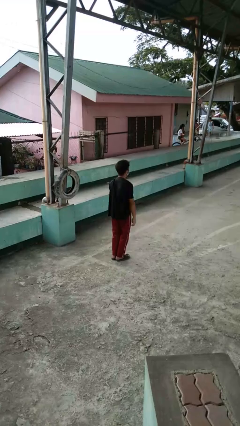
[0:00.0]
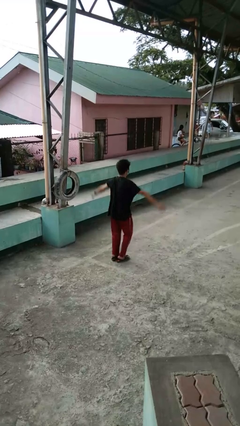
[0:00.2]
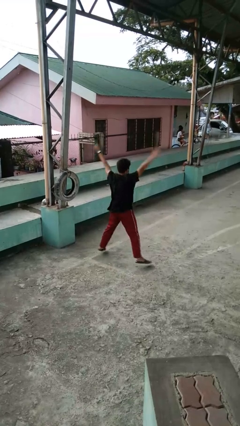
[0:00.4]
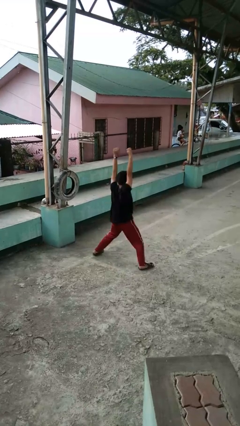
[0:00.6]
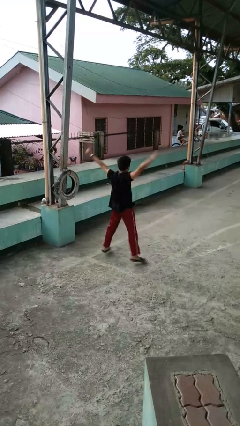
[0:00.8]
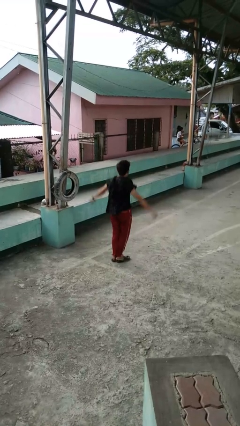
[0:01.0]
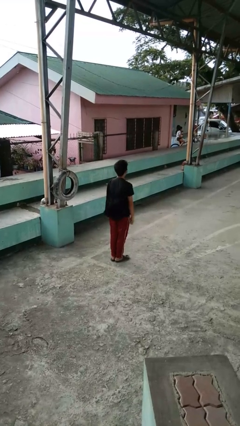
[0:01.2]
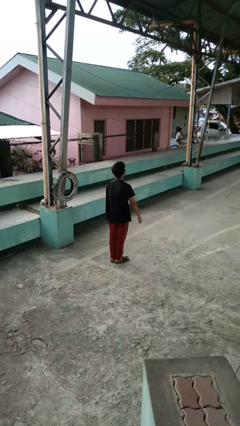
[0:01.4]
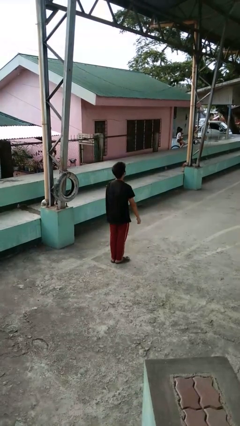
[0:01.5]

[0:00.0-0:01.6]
person exercises with jumping jacks

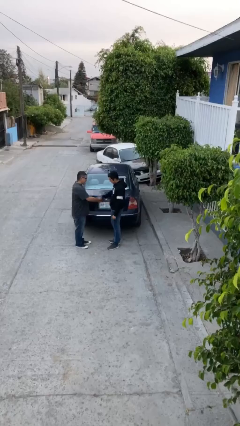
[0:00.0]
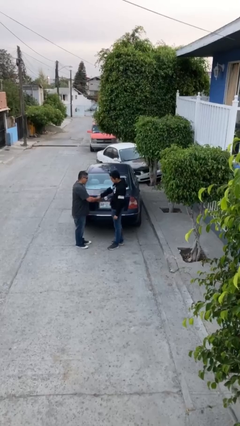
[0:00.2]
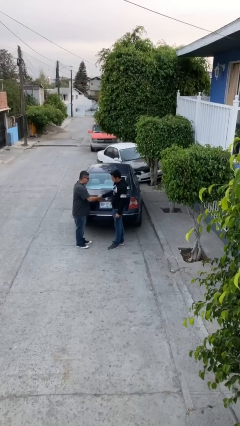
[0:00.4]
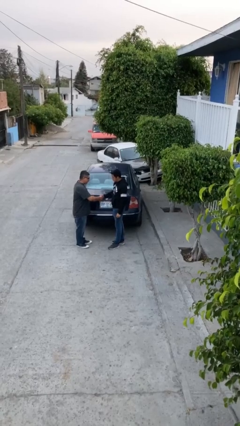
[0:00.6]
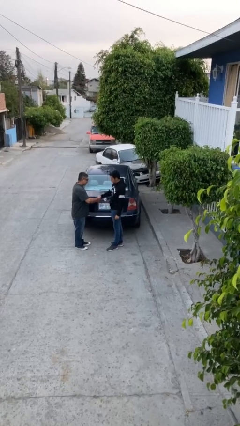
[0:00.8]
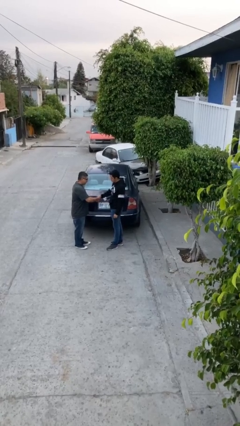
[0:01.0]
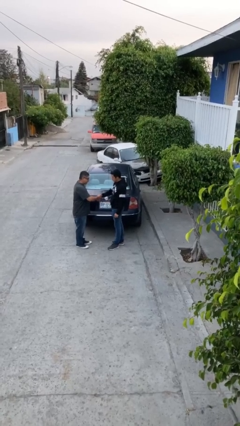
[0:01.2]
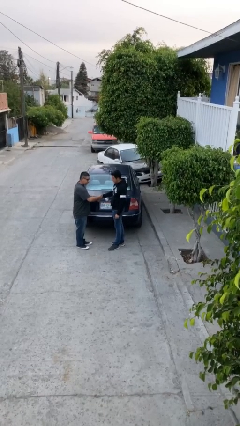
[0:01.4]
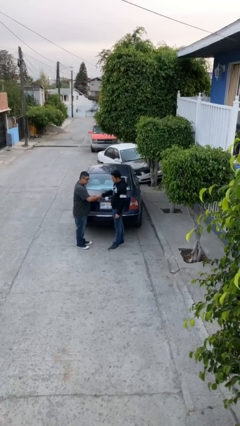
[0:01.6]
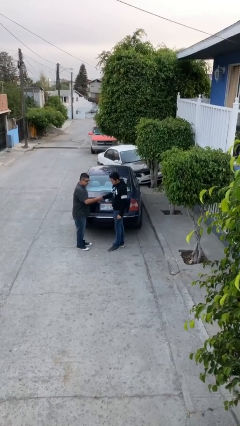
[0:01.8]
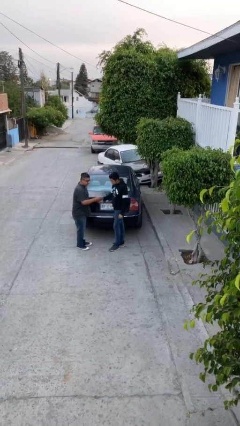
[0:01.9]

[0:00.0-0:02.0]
person shakes hand

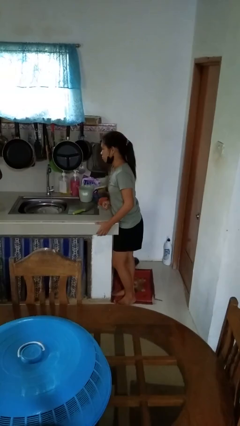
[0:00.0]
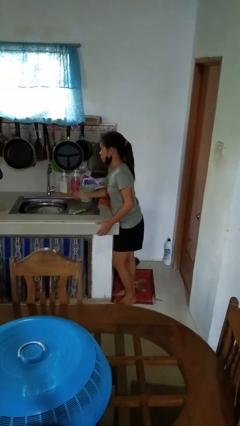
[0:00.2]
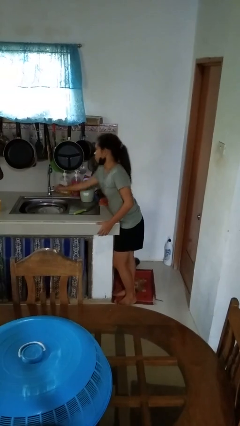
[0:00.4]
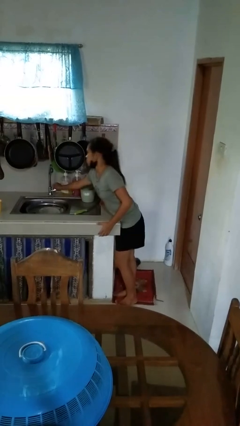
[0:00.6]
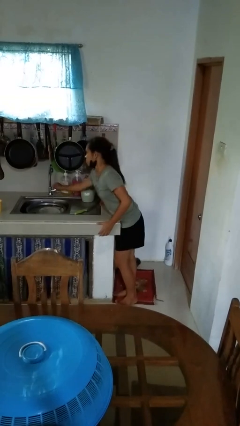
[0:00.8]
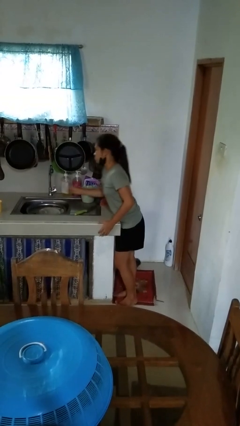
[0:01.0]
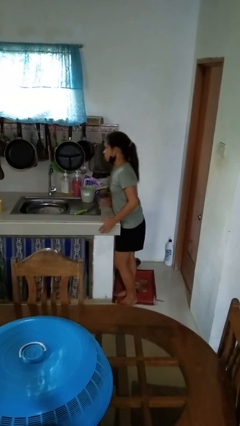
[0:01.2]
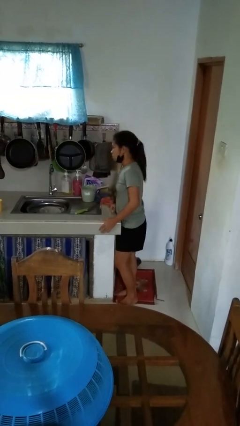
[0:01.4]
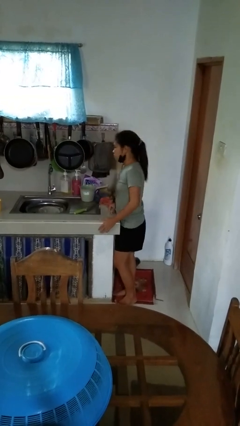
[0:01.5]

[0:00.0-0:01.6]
person turns off faucet

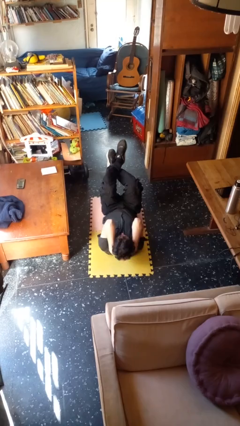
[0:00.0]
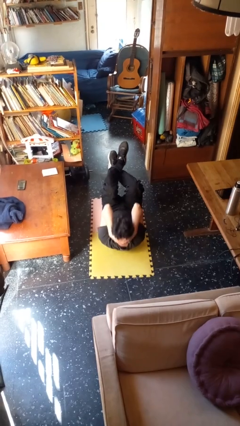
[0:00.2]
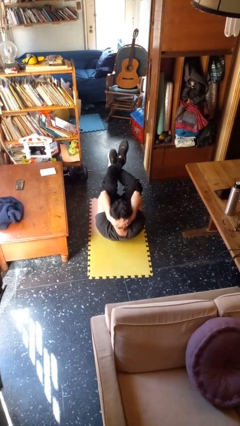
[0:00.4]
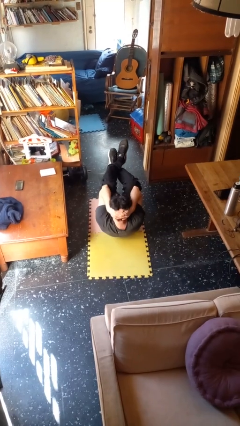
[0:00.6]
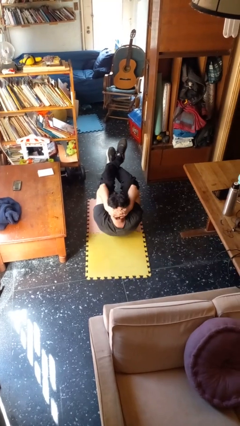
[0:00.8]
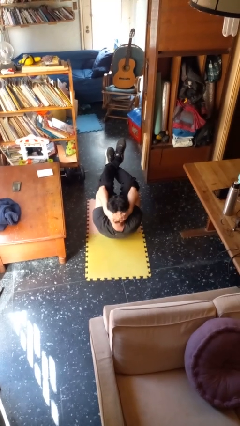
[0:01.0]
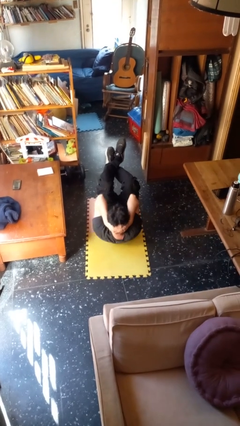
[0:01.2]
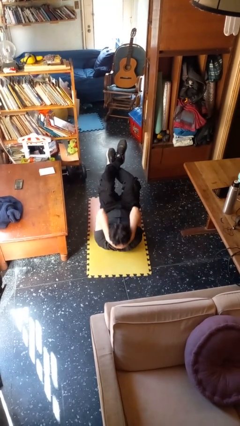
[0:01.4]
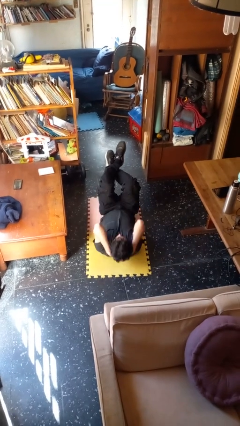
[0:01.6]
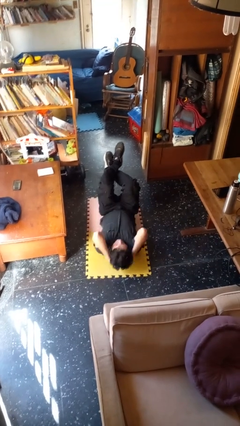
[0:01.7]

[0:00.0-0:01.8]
person exercises with situp

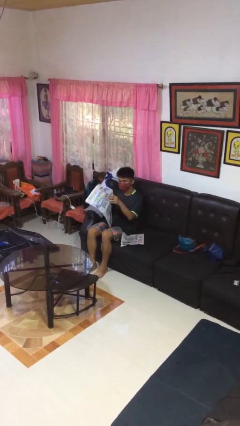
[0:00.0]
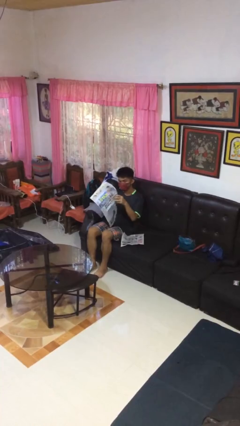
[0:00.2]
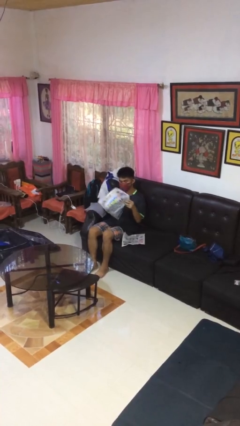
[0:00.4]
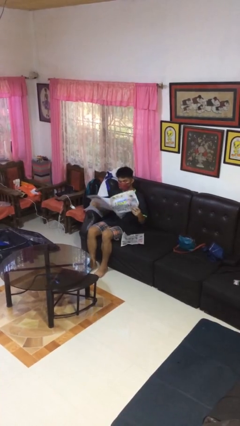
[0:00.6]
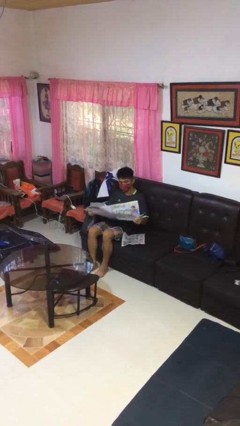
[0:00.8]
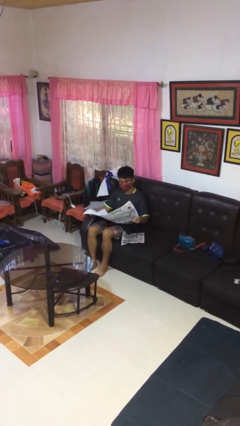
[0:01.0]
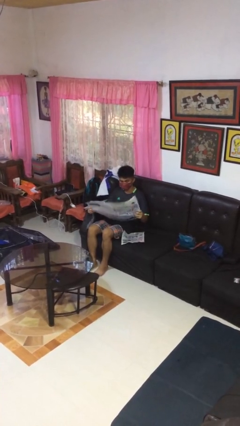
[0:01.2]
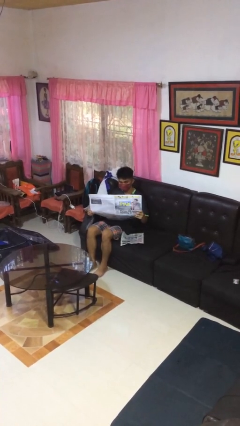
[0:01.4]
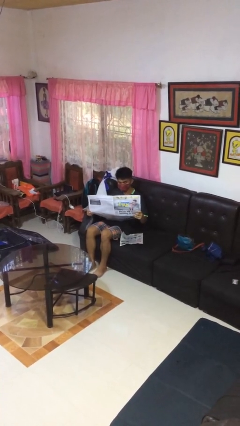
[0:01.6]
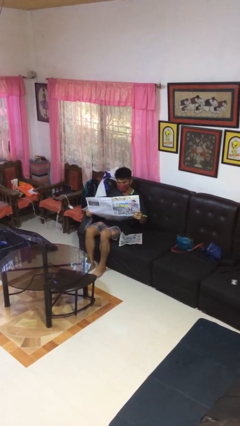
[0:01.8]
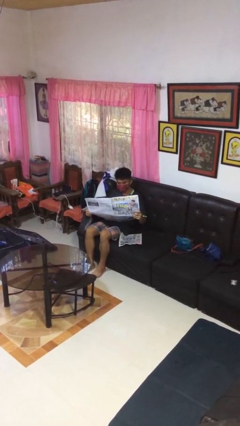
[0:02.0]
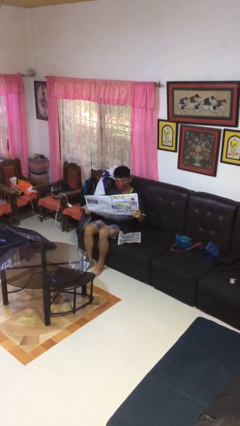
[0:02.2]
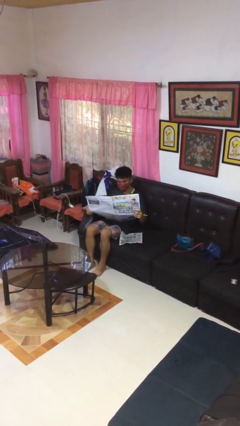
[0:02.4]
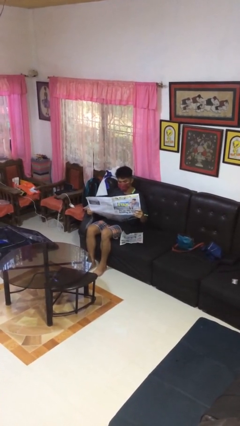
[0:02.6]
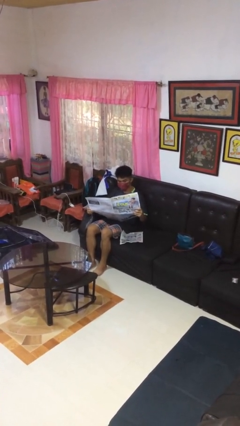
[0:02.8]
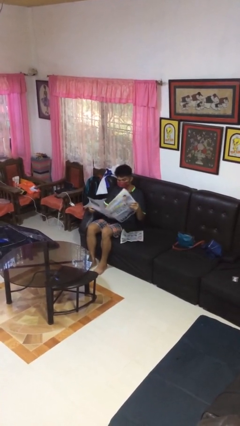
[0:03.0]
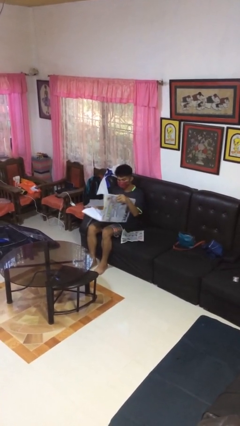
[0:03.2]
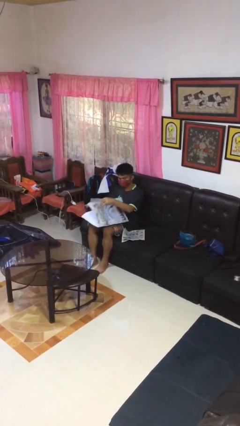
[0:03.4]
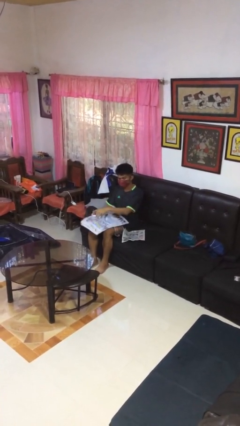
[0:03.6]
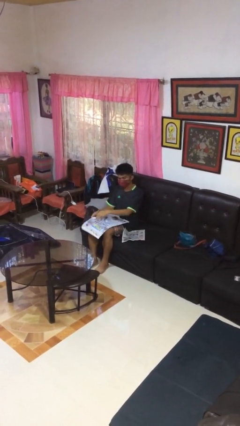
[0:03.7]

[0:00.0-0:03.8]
person reads newspaper

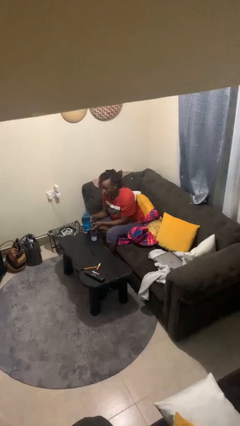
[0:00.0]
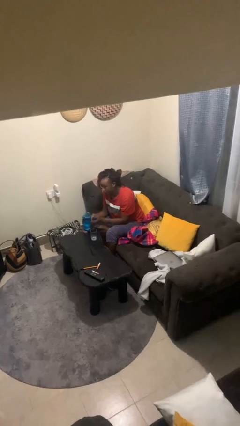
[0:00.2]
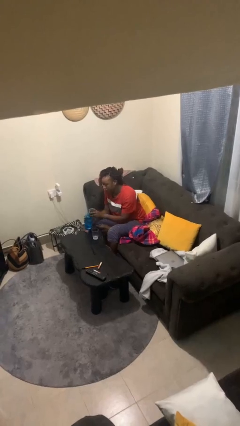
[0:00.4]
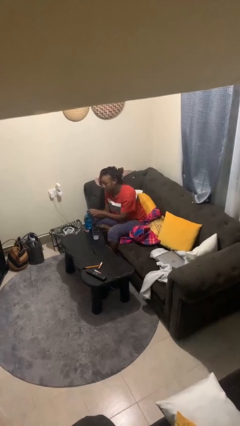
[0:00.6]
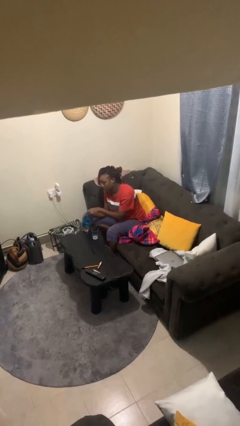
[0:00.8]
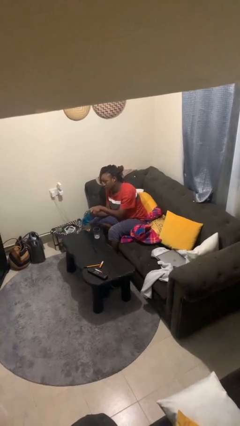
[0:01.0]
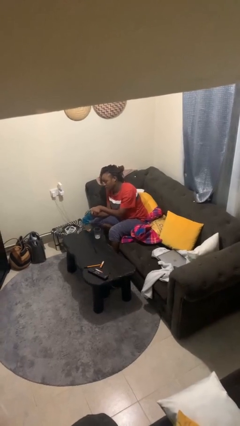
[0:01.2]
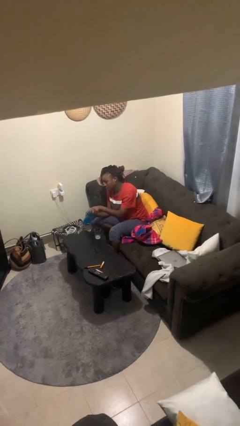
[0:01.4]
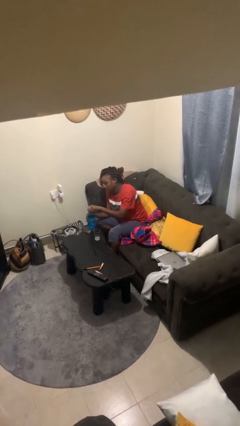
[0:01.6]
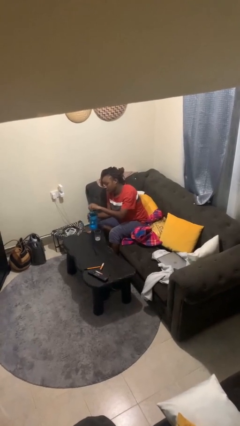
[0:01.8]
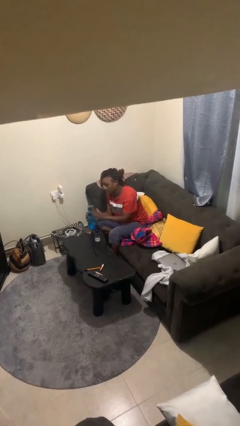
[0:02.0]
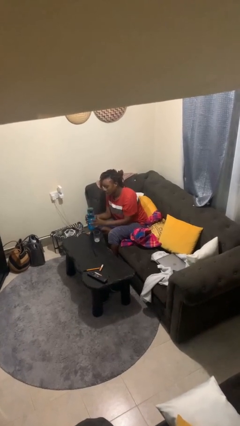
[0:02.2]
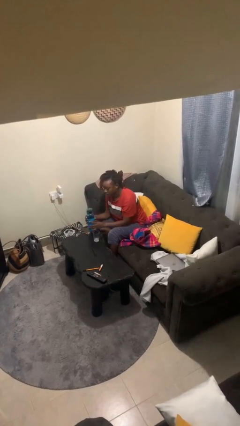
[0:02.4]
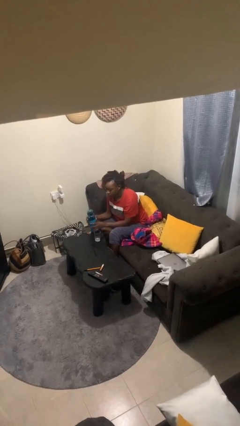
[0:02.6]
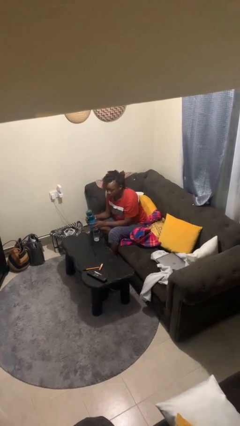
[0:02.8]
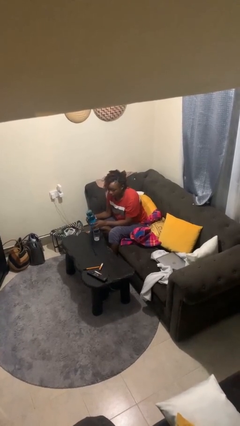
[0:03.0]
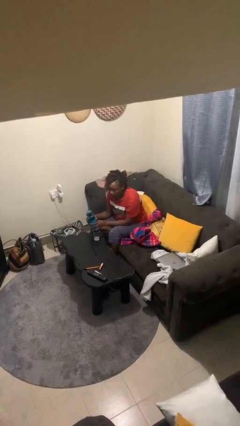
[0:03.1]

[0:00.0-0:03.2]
person screws lid to bottle

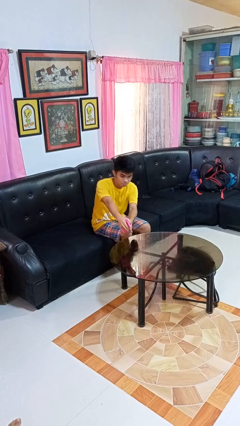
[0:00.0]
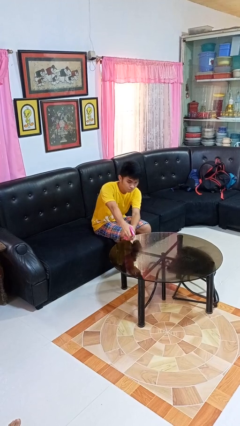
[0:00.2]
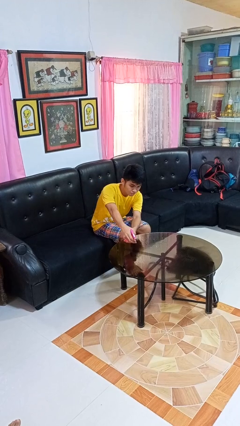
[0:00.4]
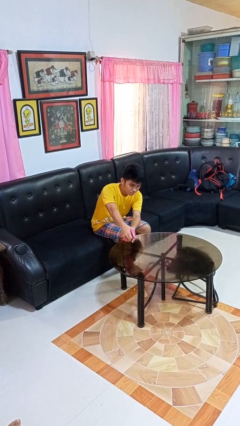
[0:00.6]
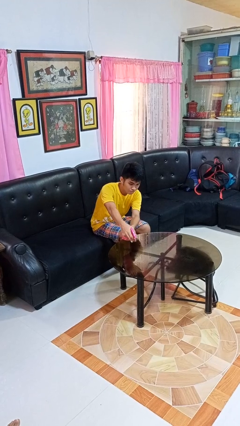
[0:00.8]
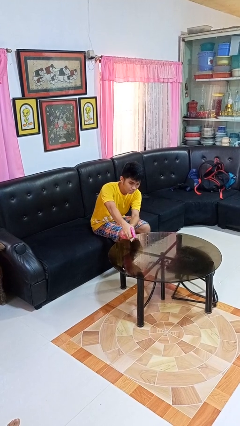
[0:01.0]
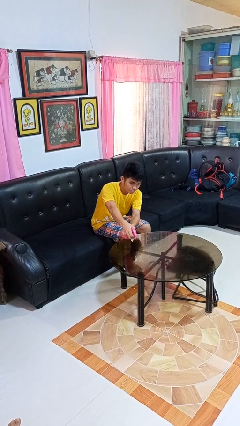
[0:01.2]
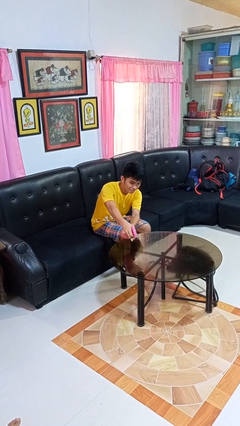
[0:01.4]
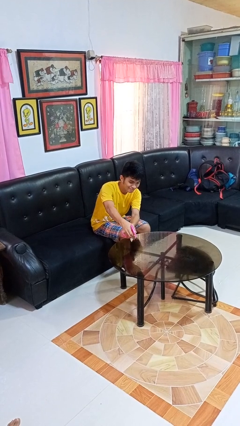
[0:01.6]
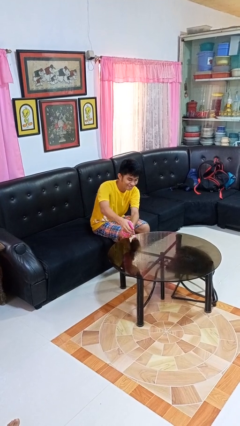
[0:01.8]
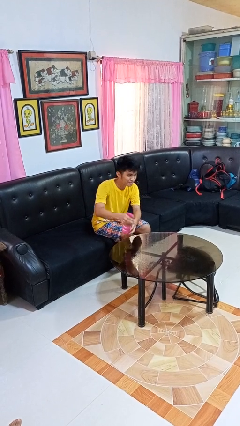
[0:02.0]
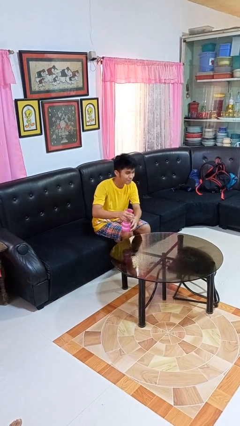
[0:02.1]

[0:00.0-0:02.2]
person sprays from bottle

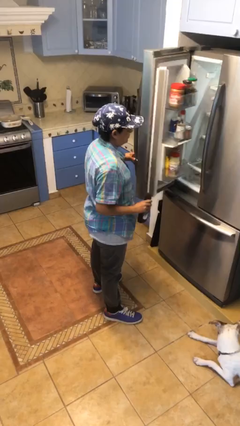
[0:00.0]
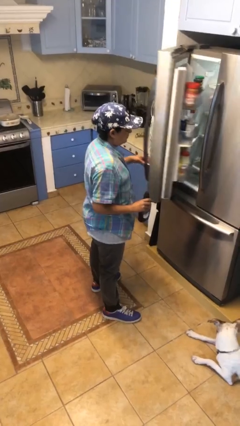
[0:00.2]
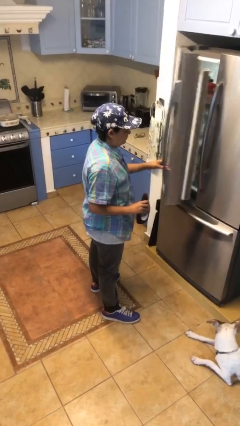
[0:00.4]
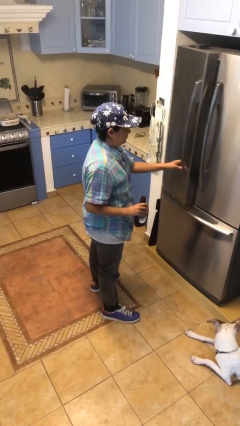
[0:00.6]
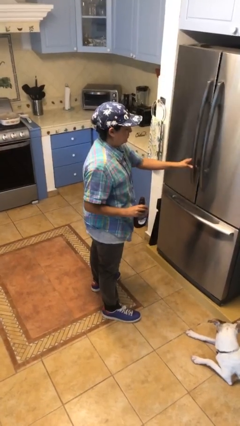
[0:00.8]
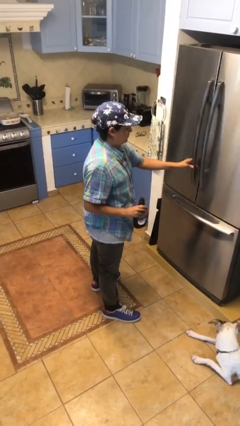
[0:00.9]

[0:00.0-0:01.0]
person closes refrigerator
